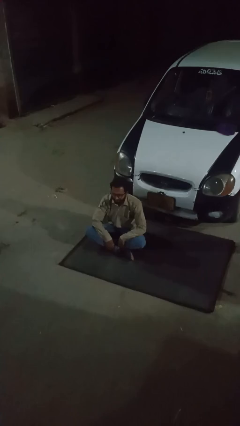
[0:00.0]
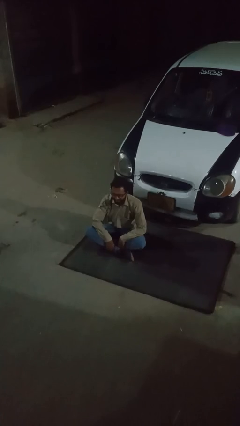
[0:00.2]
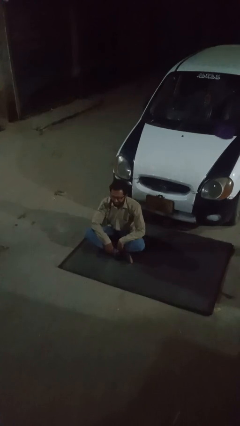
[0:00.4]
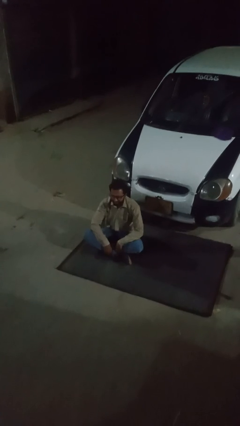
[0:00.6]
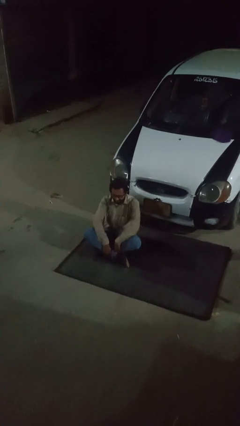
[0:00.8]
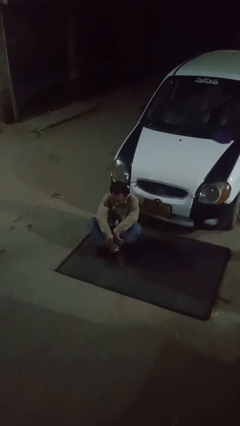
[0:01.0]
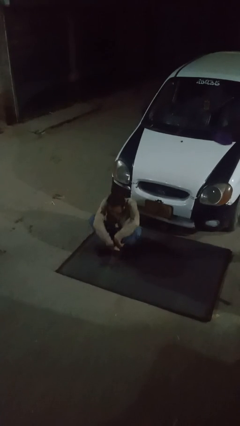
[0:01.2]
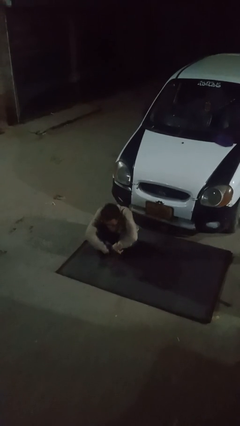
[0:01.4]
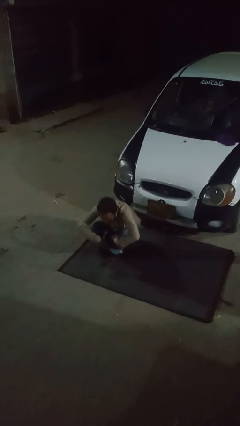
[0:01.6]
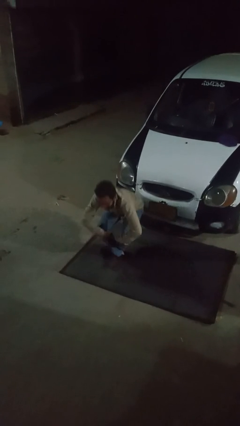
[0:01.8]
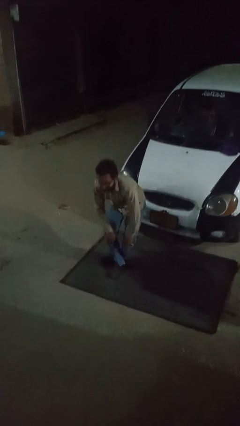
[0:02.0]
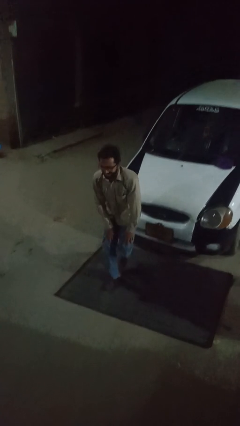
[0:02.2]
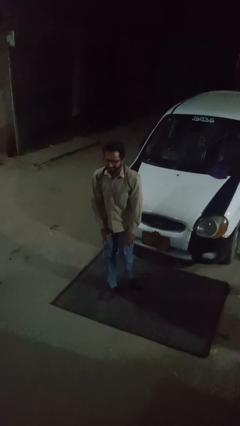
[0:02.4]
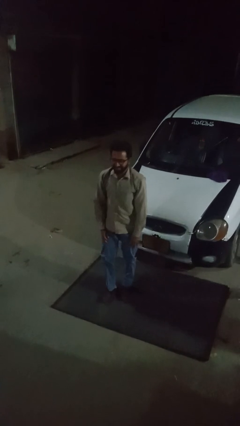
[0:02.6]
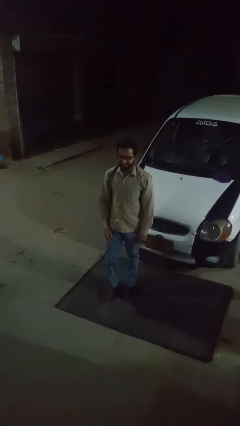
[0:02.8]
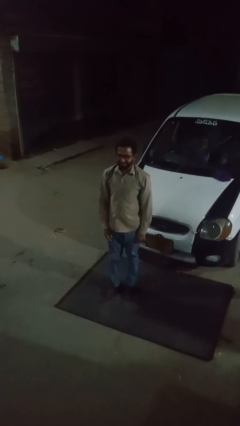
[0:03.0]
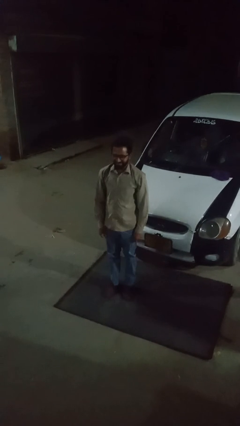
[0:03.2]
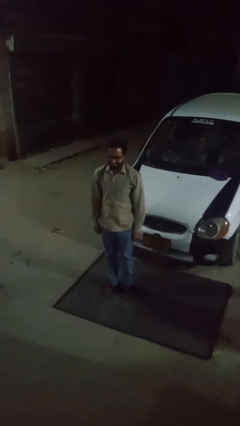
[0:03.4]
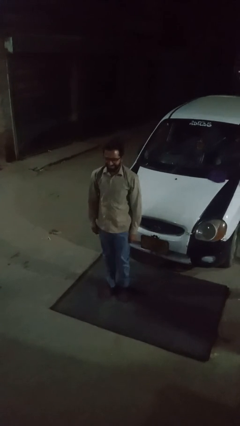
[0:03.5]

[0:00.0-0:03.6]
person stands up from floor

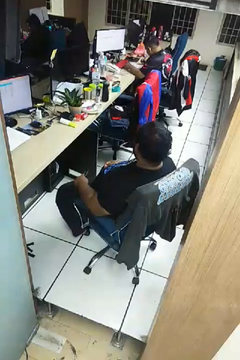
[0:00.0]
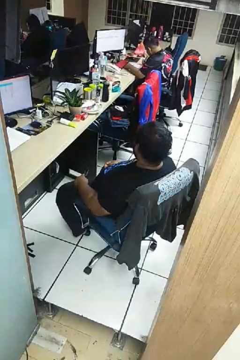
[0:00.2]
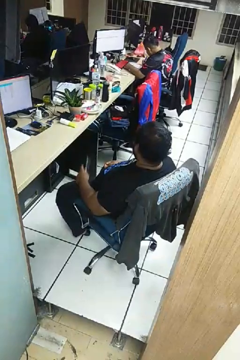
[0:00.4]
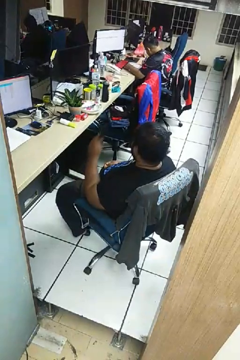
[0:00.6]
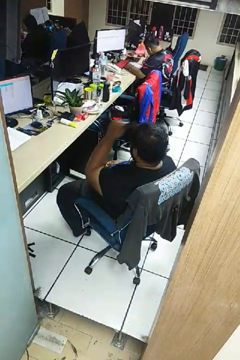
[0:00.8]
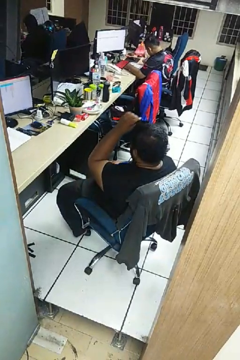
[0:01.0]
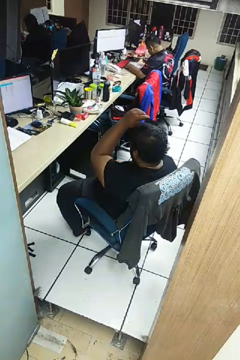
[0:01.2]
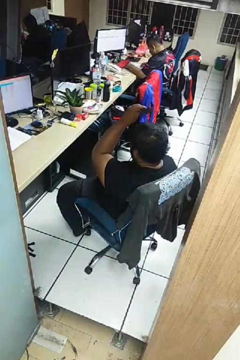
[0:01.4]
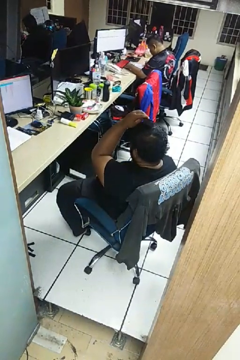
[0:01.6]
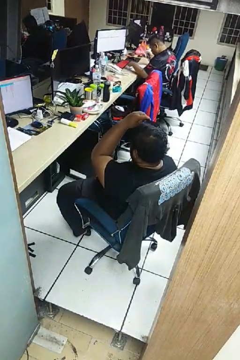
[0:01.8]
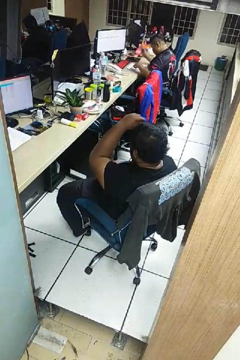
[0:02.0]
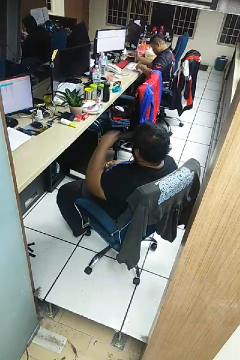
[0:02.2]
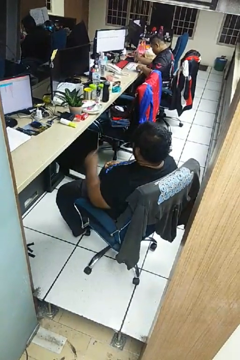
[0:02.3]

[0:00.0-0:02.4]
person brushes hair

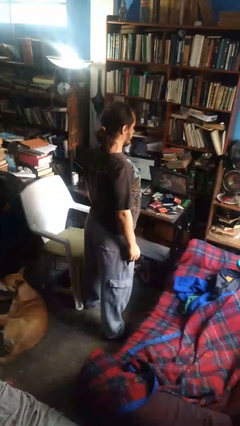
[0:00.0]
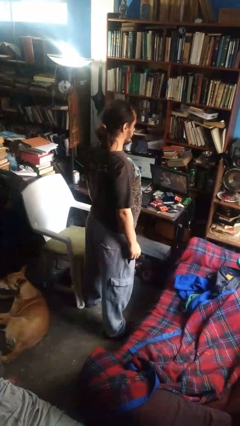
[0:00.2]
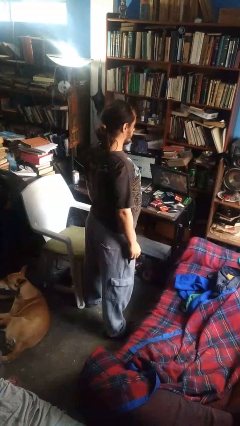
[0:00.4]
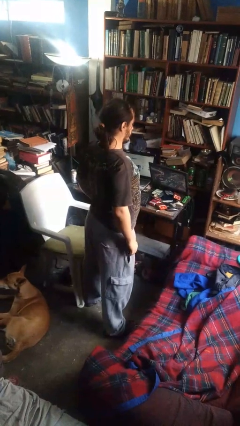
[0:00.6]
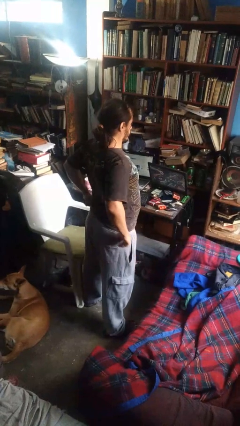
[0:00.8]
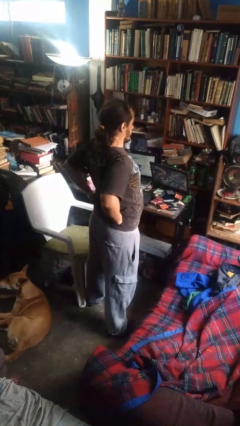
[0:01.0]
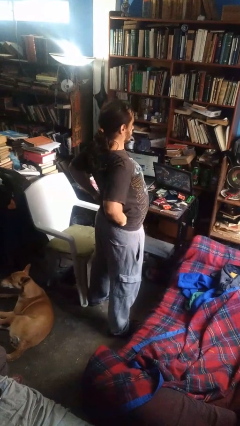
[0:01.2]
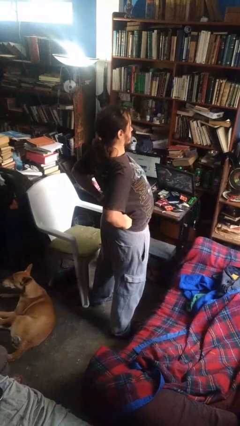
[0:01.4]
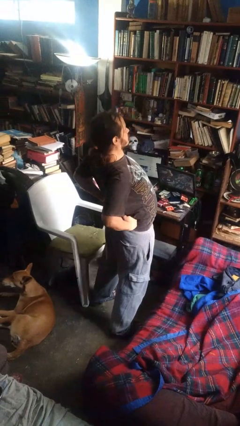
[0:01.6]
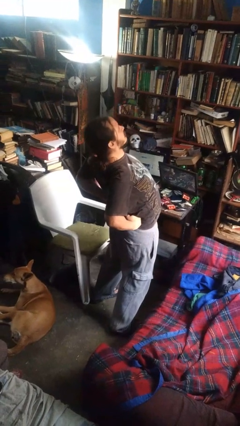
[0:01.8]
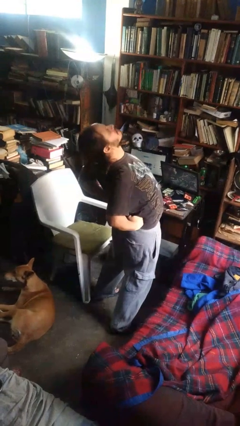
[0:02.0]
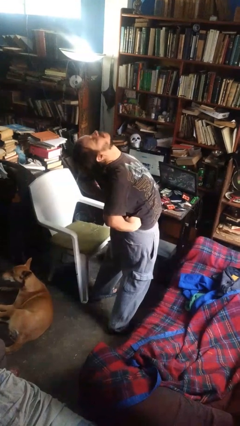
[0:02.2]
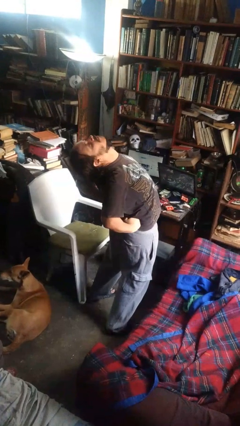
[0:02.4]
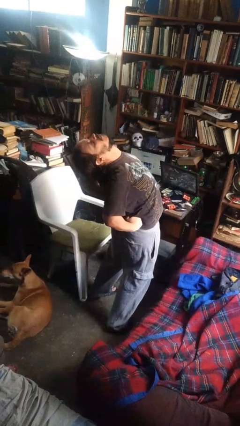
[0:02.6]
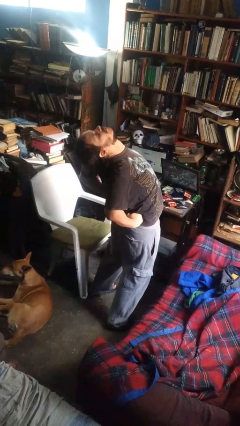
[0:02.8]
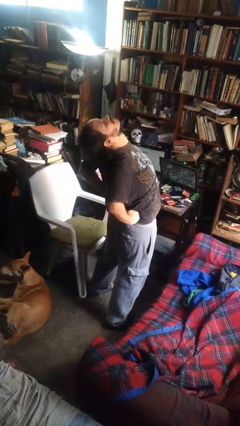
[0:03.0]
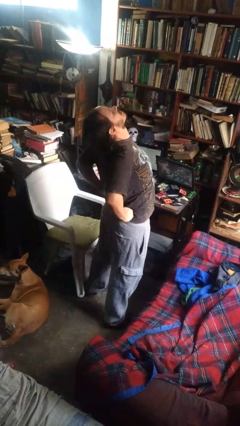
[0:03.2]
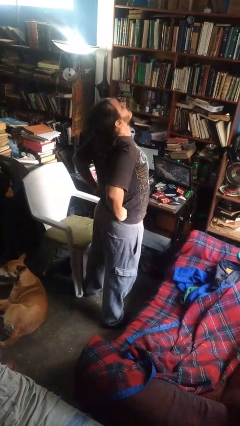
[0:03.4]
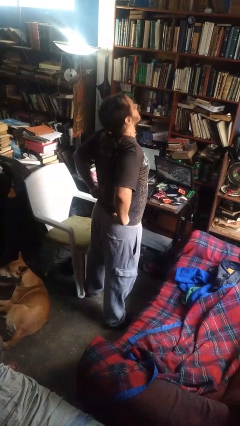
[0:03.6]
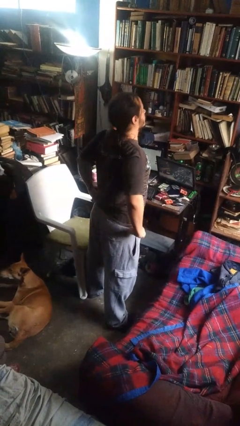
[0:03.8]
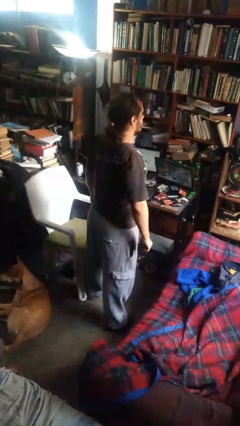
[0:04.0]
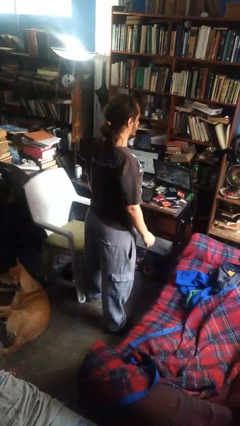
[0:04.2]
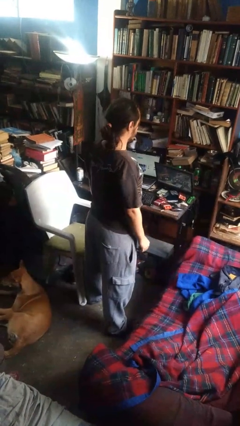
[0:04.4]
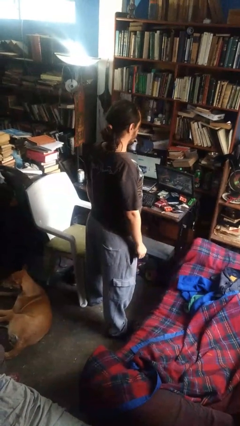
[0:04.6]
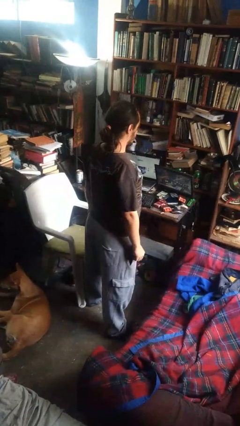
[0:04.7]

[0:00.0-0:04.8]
person stretches back

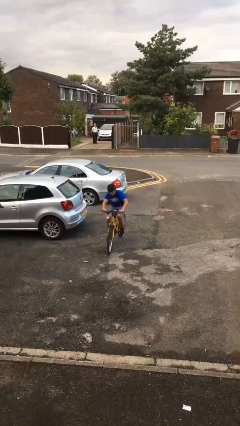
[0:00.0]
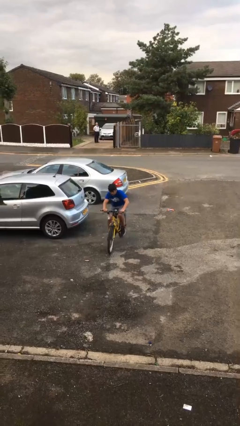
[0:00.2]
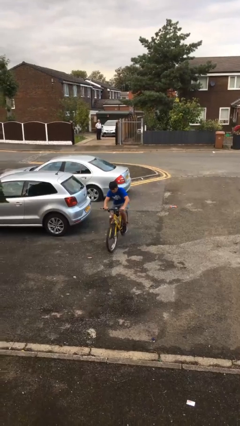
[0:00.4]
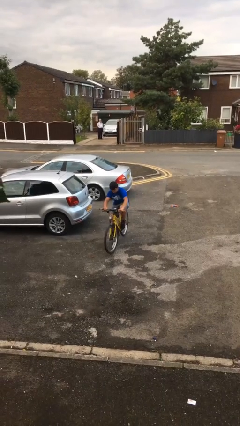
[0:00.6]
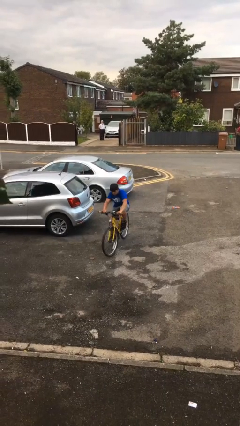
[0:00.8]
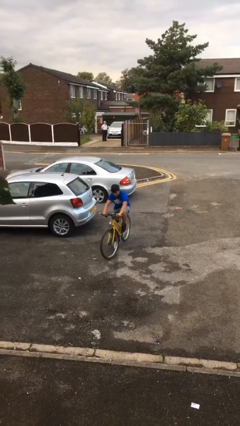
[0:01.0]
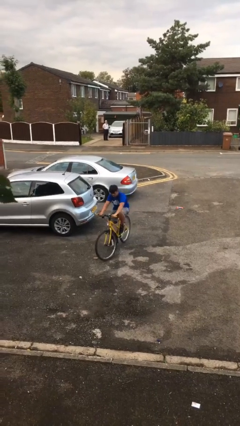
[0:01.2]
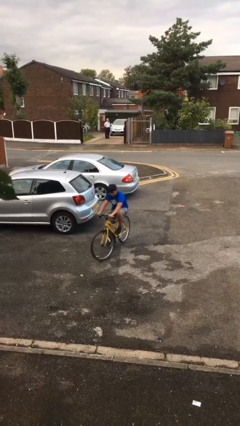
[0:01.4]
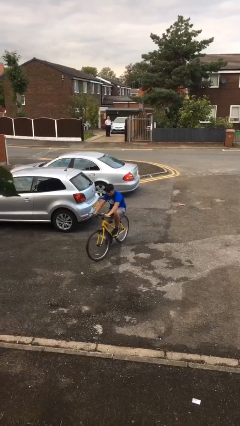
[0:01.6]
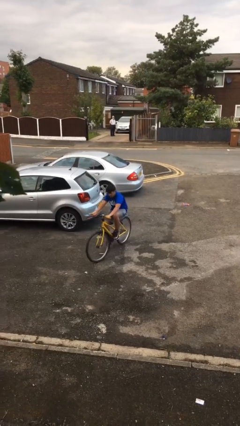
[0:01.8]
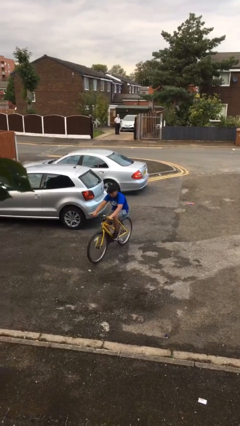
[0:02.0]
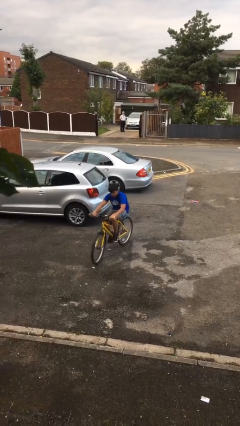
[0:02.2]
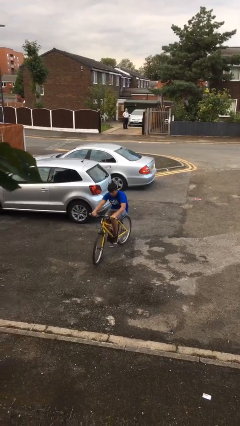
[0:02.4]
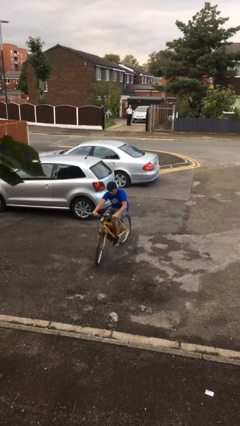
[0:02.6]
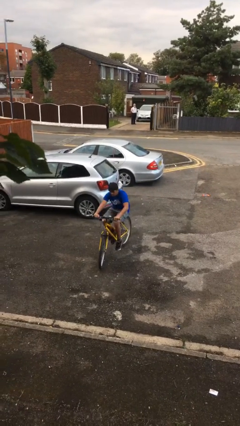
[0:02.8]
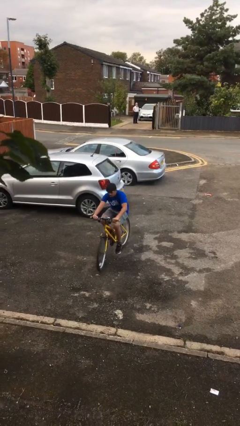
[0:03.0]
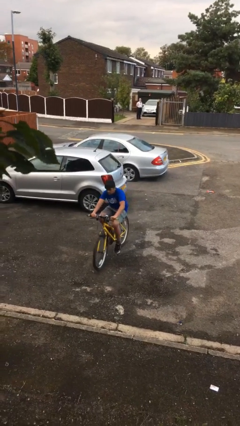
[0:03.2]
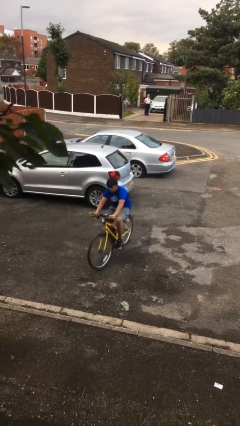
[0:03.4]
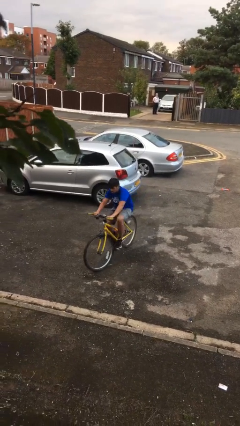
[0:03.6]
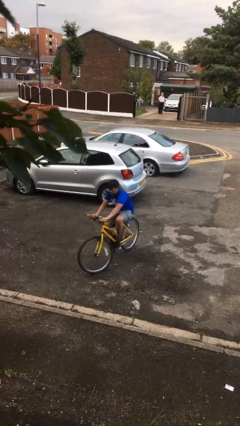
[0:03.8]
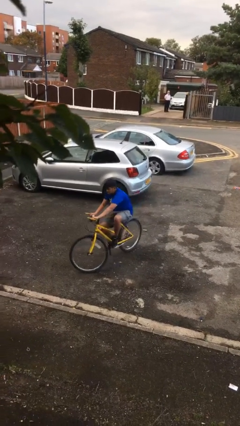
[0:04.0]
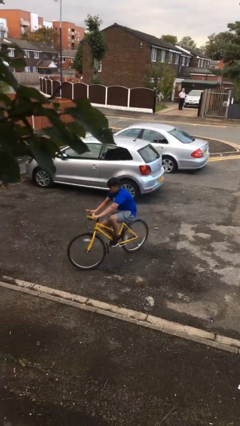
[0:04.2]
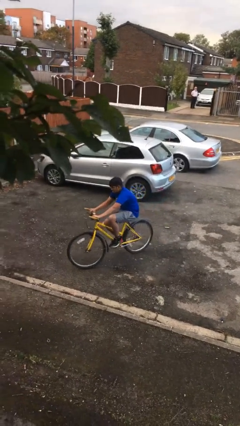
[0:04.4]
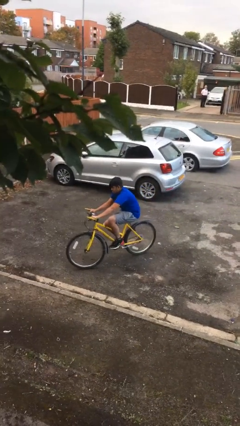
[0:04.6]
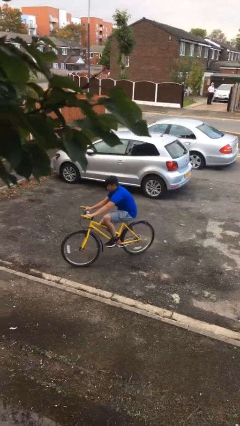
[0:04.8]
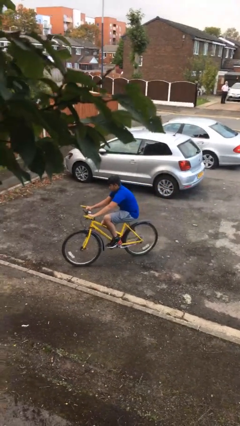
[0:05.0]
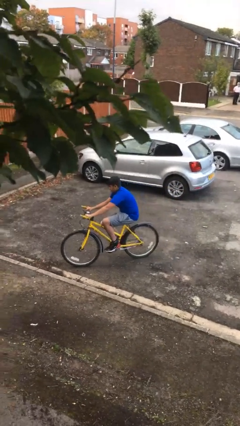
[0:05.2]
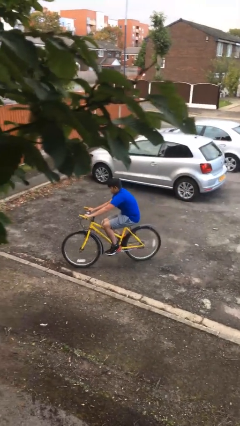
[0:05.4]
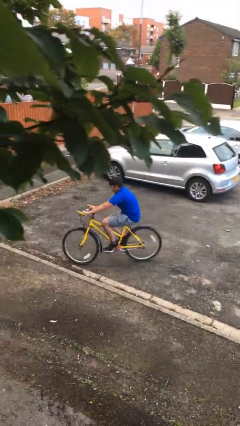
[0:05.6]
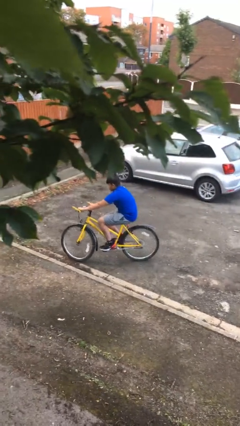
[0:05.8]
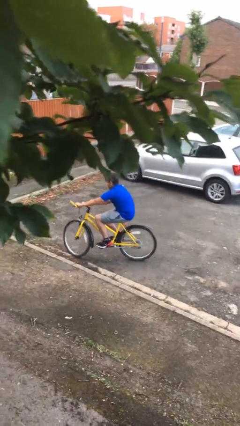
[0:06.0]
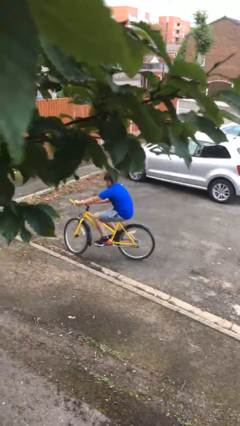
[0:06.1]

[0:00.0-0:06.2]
person rides bicycle

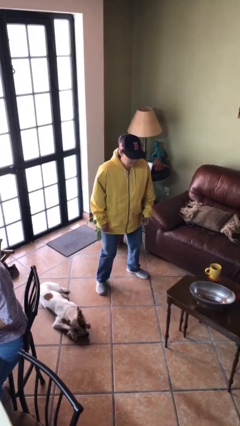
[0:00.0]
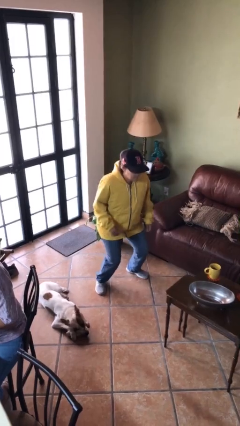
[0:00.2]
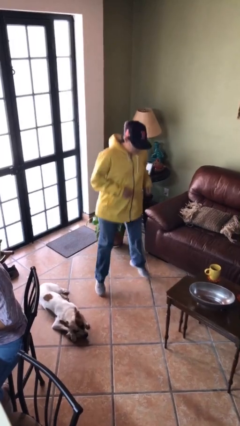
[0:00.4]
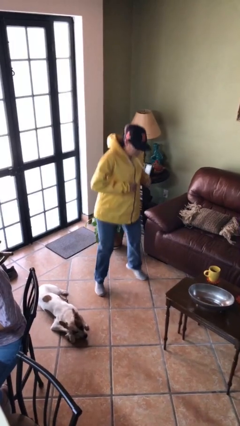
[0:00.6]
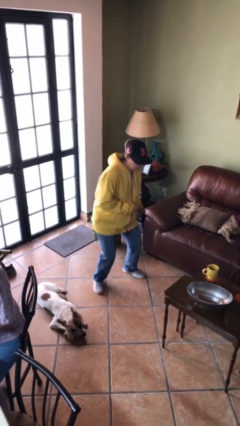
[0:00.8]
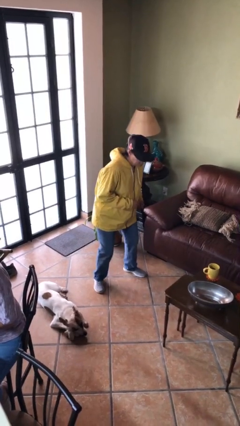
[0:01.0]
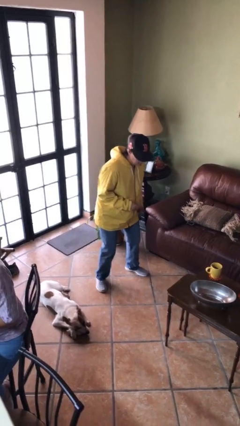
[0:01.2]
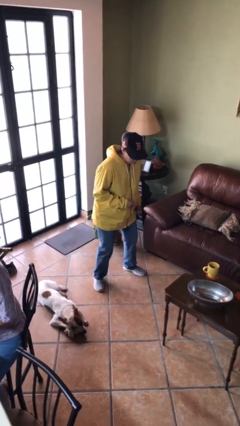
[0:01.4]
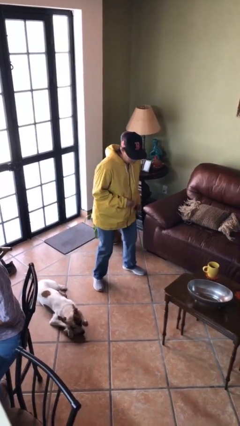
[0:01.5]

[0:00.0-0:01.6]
person jumps
